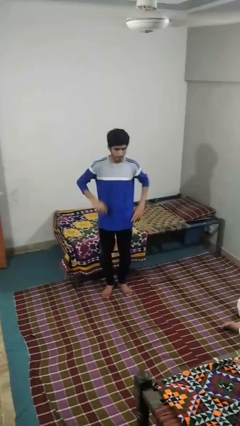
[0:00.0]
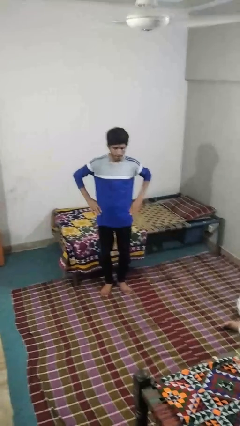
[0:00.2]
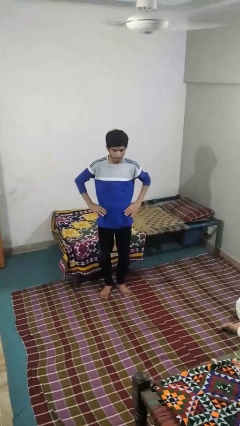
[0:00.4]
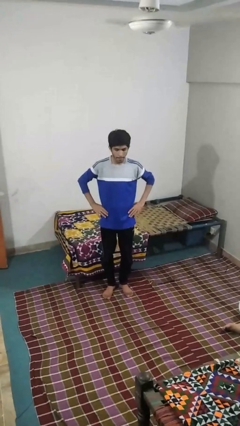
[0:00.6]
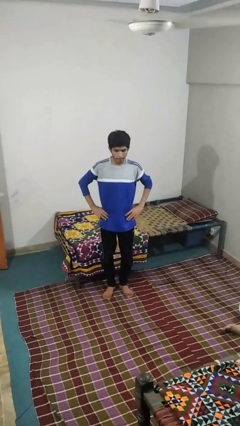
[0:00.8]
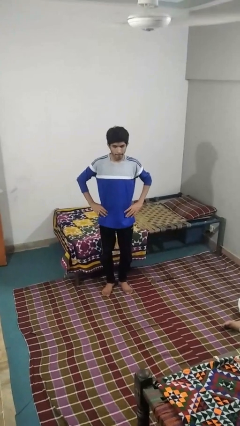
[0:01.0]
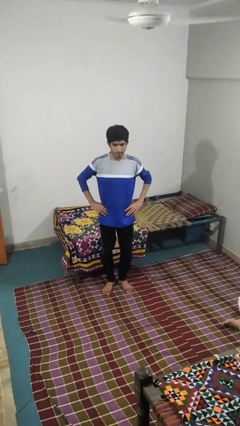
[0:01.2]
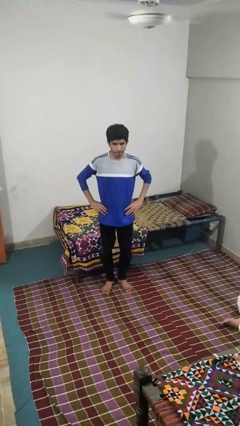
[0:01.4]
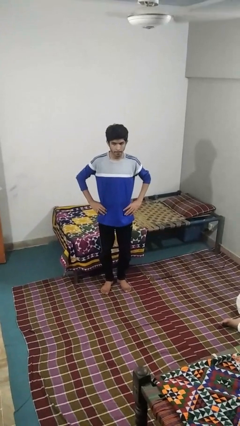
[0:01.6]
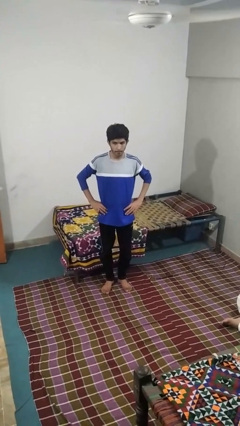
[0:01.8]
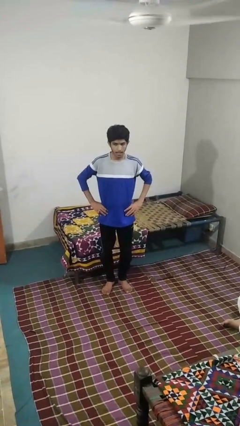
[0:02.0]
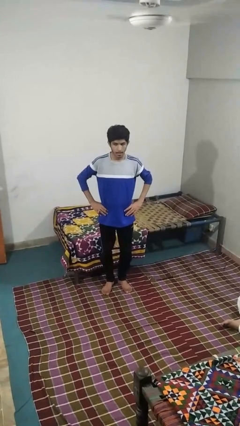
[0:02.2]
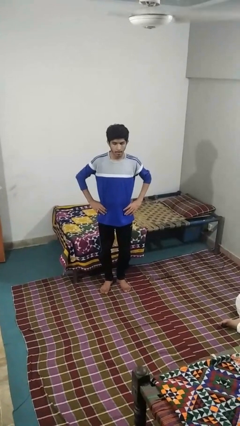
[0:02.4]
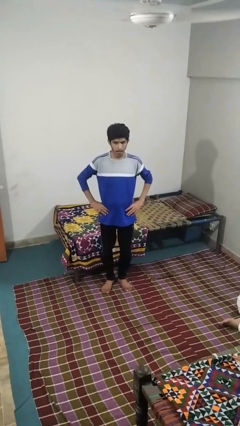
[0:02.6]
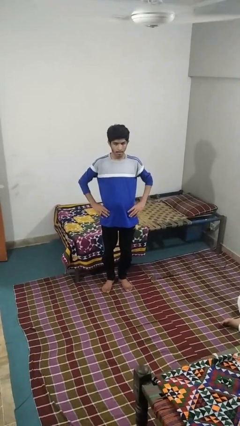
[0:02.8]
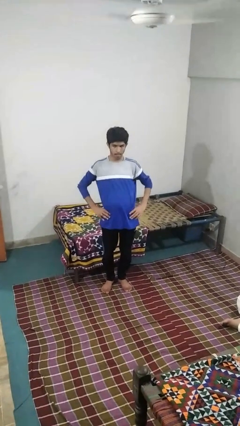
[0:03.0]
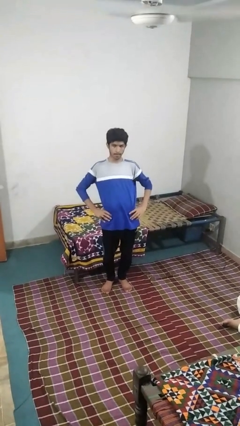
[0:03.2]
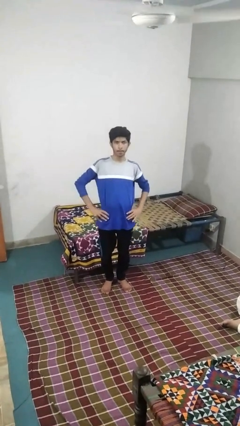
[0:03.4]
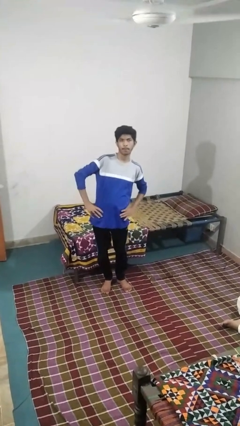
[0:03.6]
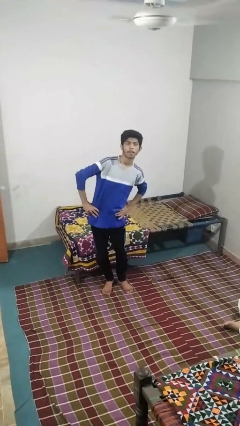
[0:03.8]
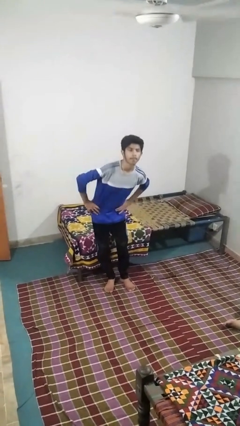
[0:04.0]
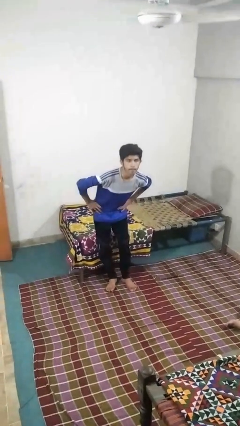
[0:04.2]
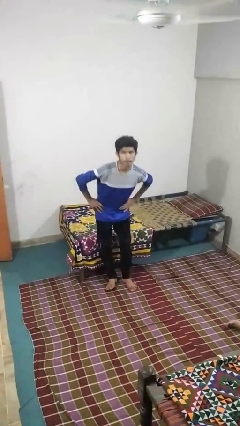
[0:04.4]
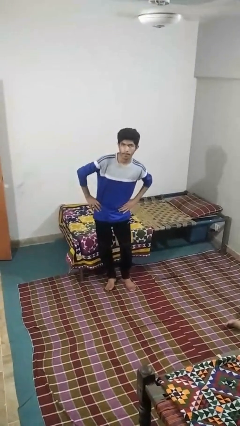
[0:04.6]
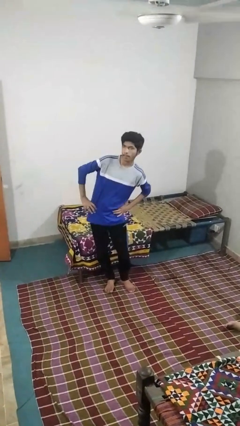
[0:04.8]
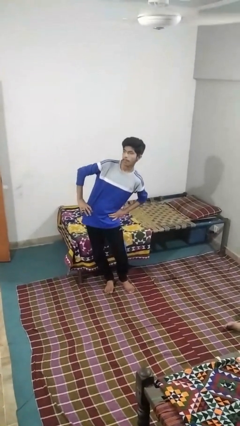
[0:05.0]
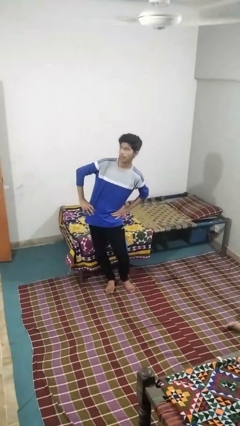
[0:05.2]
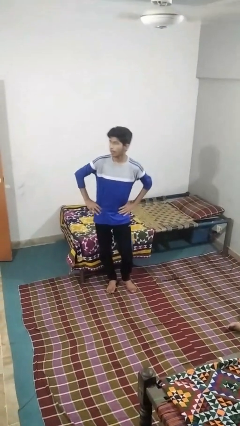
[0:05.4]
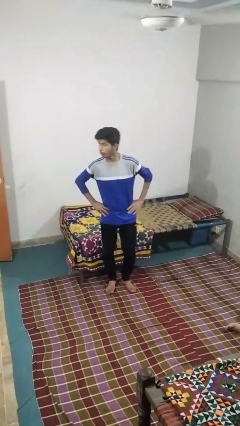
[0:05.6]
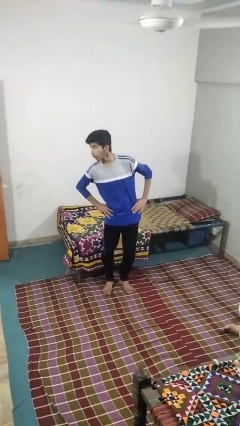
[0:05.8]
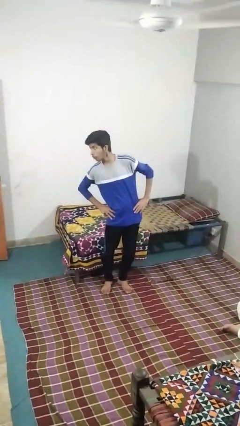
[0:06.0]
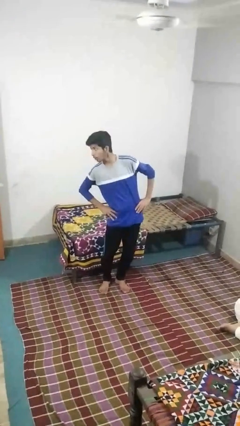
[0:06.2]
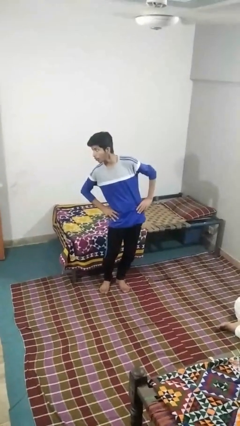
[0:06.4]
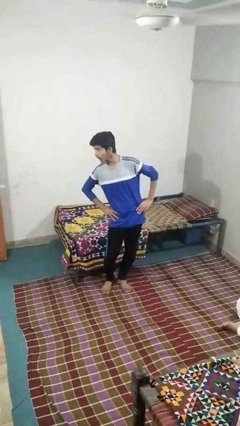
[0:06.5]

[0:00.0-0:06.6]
person wiggles hips

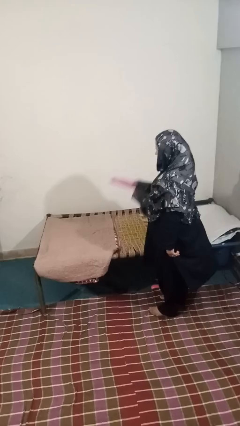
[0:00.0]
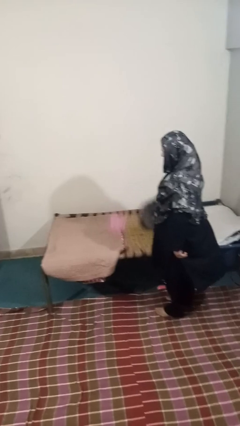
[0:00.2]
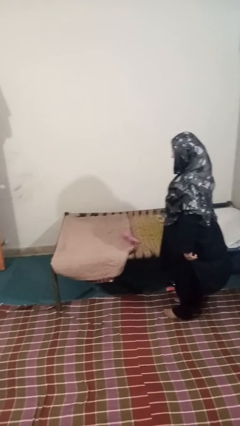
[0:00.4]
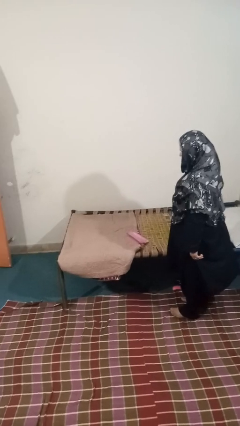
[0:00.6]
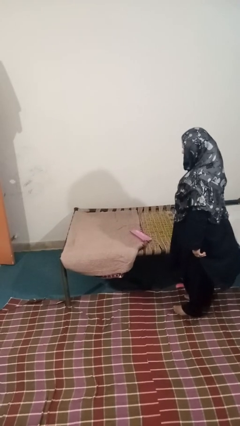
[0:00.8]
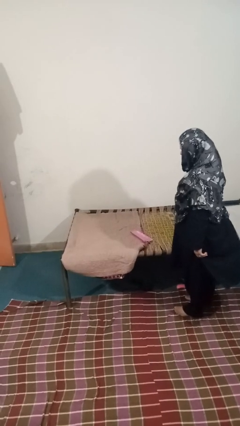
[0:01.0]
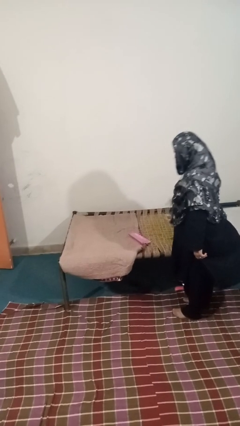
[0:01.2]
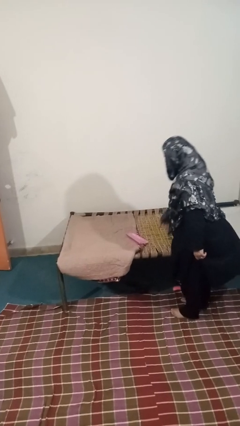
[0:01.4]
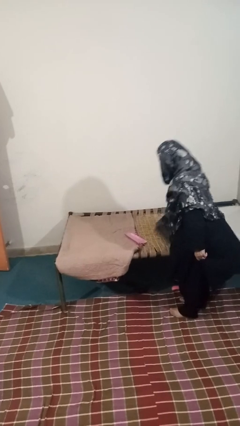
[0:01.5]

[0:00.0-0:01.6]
person puts down object on bed

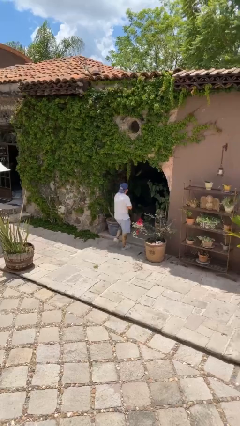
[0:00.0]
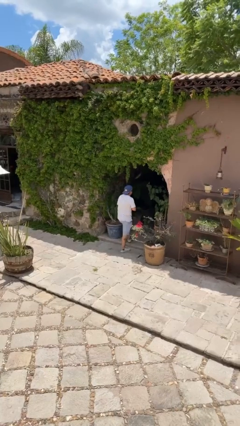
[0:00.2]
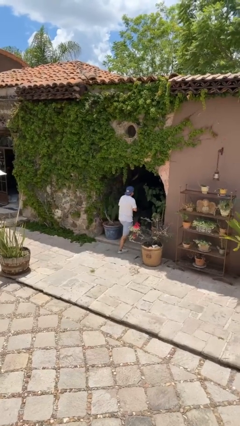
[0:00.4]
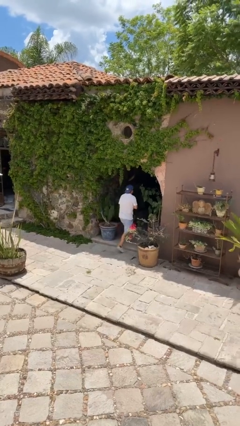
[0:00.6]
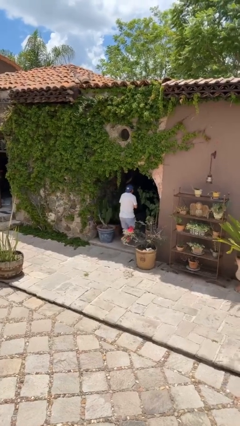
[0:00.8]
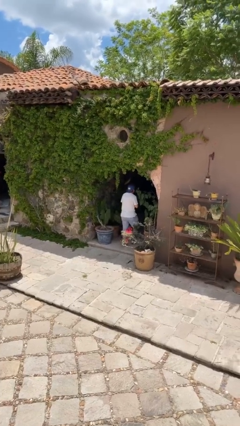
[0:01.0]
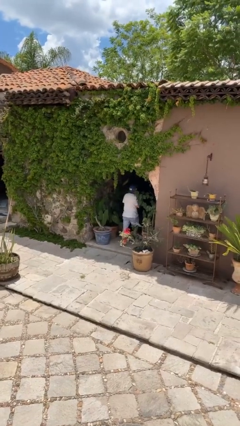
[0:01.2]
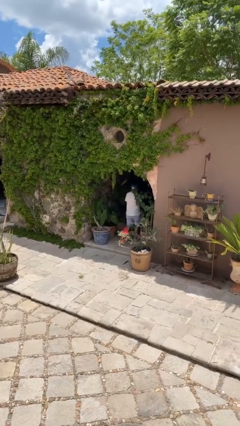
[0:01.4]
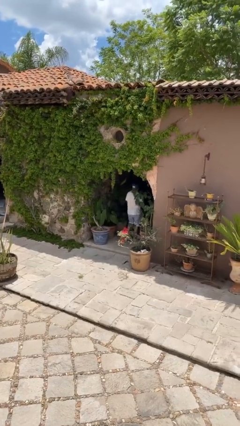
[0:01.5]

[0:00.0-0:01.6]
person exits scene through structure

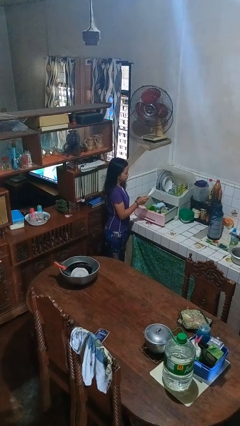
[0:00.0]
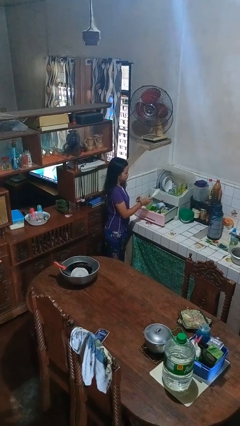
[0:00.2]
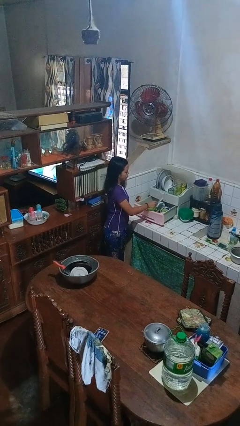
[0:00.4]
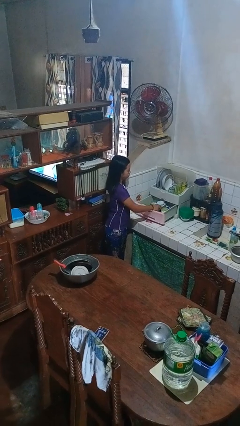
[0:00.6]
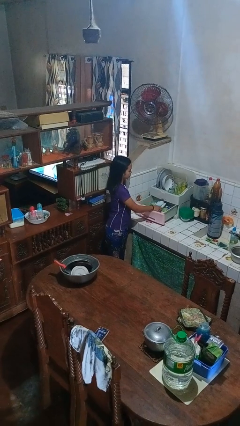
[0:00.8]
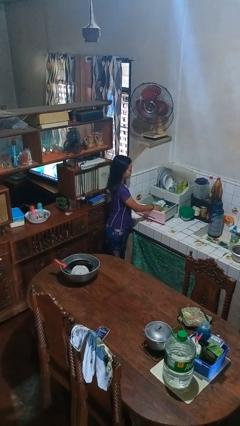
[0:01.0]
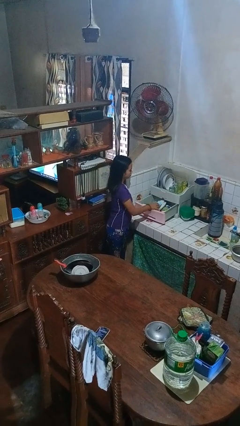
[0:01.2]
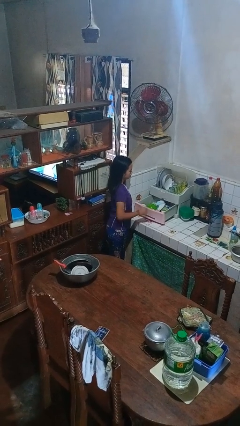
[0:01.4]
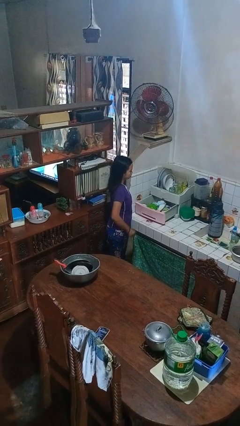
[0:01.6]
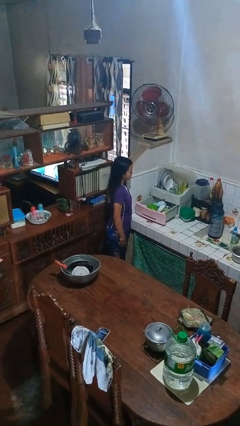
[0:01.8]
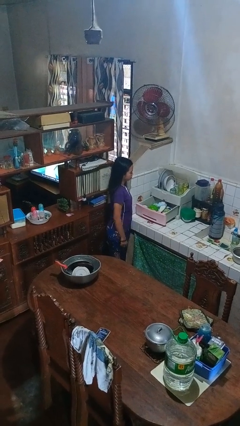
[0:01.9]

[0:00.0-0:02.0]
person puts object into kitchen drawer

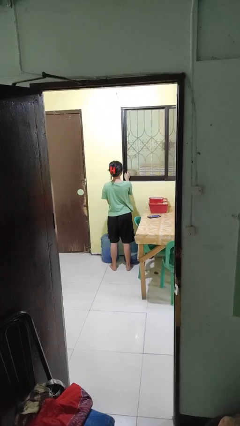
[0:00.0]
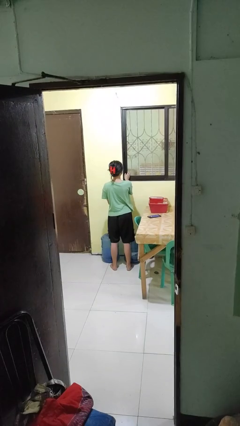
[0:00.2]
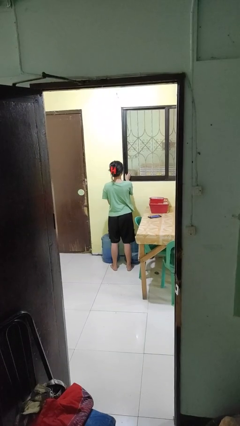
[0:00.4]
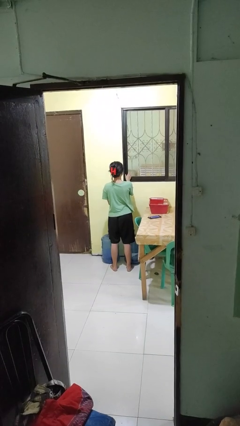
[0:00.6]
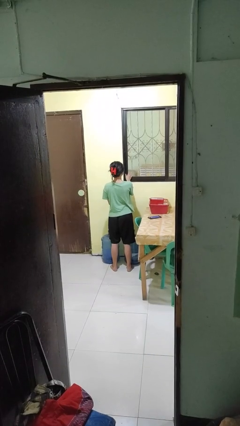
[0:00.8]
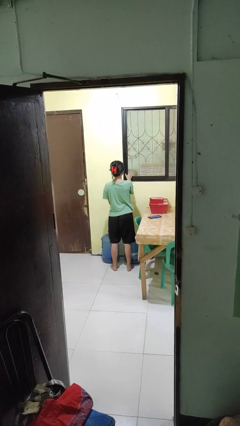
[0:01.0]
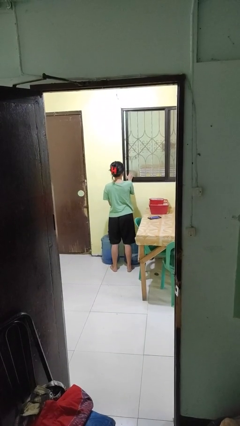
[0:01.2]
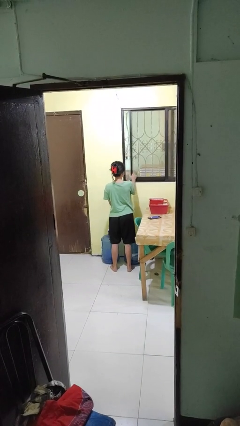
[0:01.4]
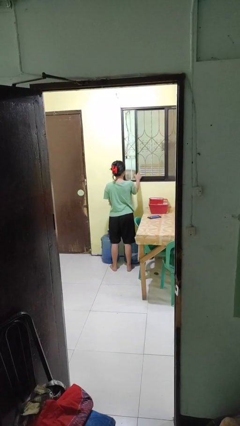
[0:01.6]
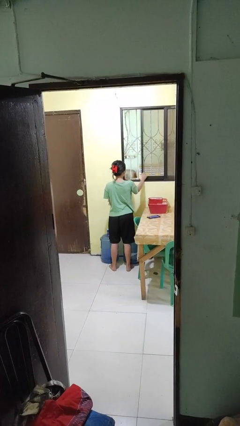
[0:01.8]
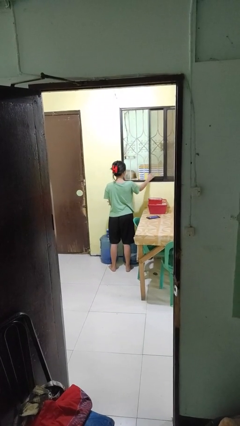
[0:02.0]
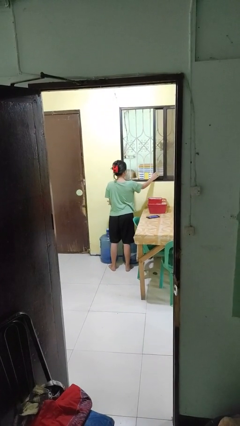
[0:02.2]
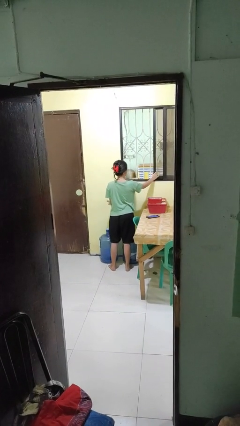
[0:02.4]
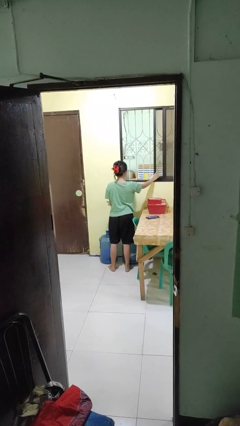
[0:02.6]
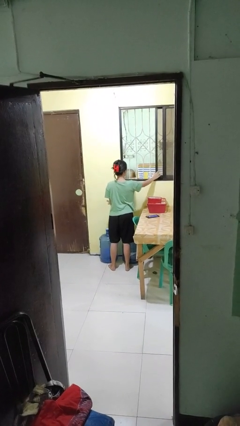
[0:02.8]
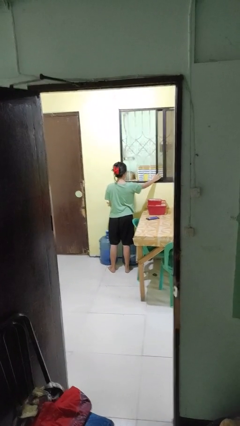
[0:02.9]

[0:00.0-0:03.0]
person opens home window

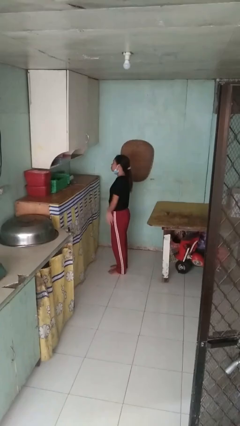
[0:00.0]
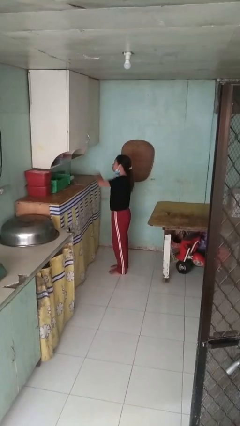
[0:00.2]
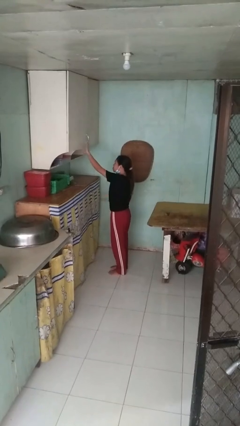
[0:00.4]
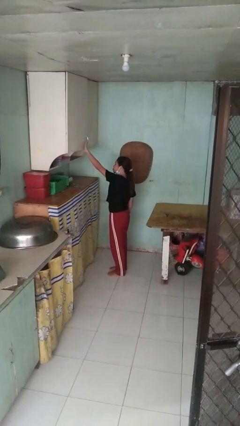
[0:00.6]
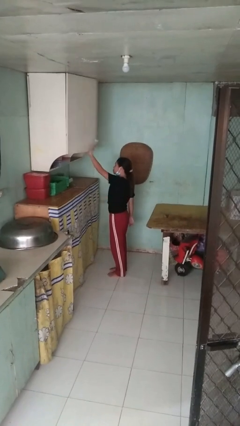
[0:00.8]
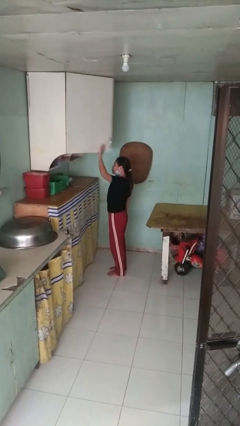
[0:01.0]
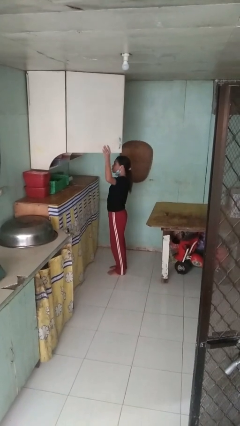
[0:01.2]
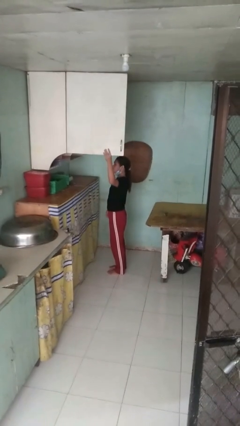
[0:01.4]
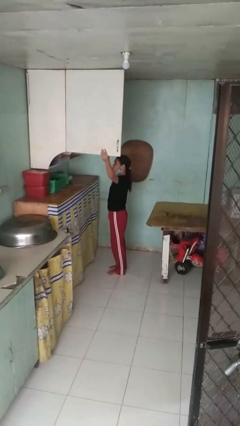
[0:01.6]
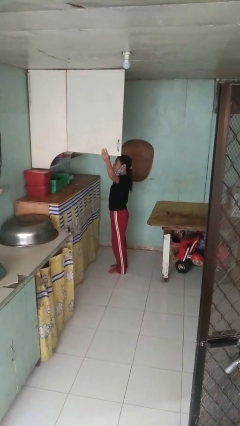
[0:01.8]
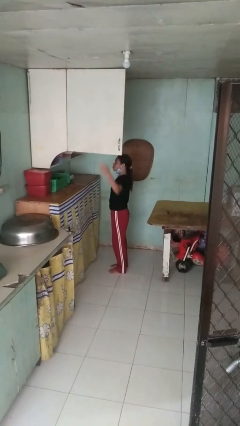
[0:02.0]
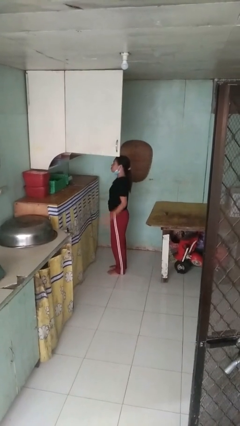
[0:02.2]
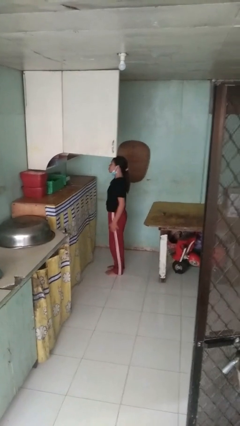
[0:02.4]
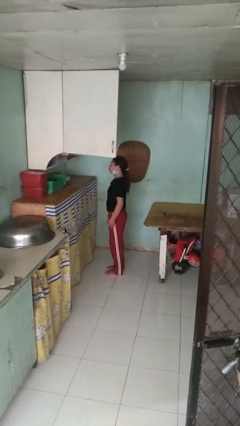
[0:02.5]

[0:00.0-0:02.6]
person opens cabinet
